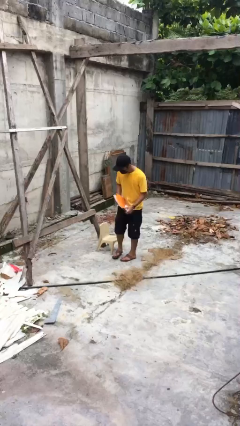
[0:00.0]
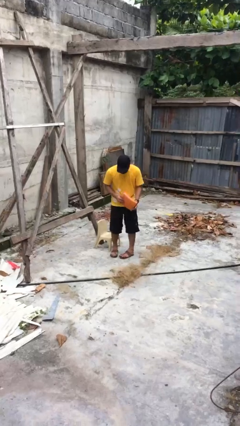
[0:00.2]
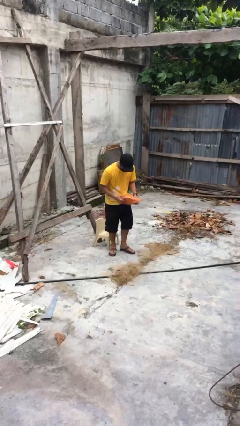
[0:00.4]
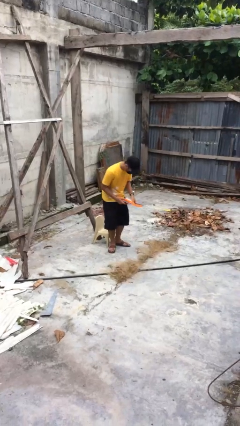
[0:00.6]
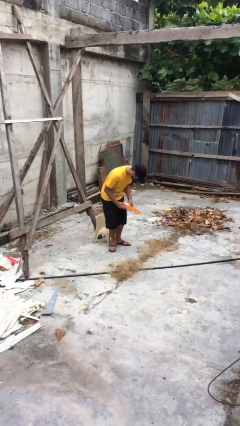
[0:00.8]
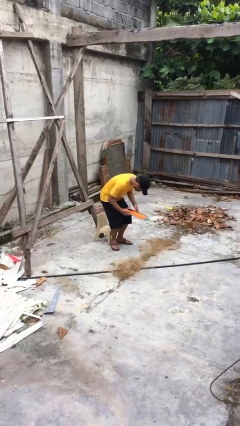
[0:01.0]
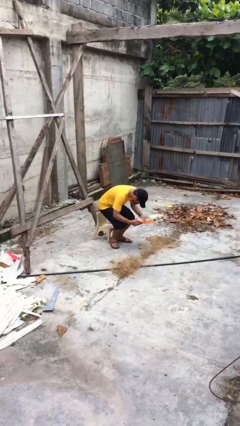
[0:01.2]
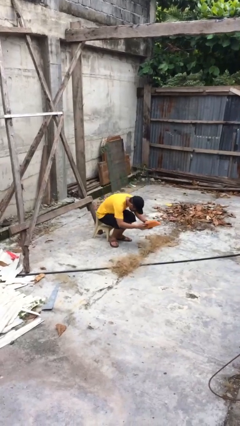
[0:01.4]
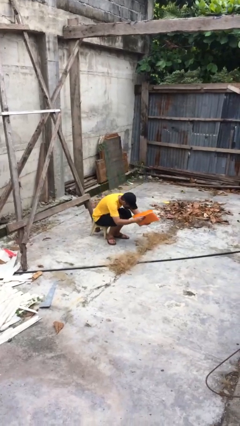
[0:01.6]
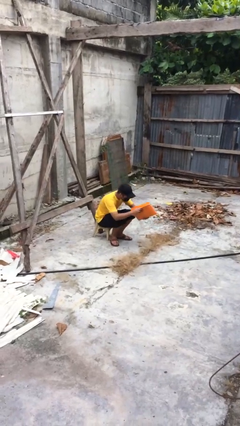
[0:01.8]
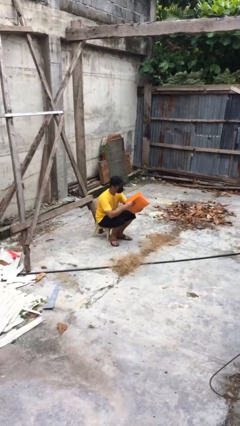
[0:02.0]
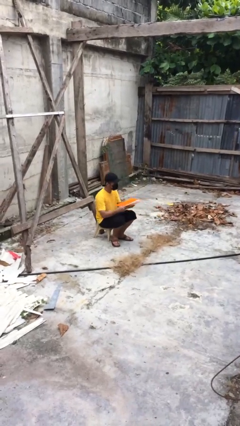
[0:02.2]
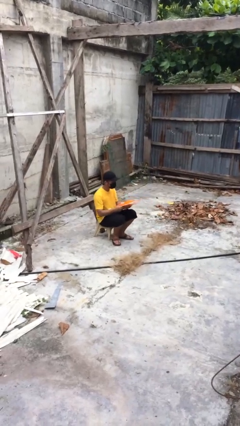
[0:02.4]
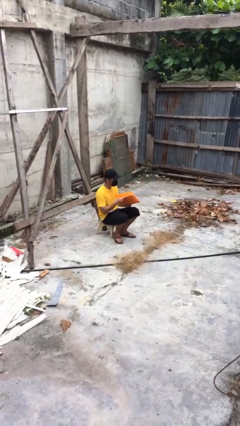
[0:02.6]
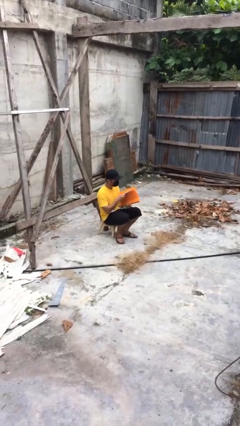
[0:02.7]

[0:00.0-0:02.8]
person sits down

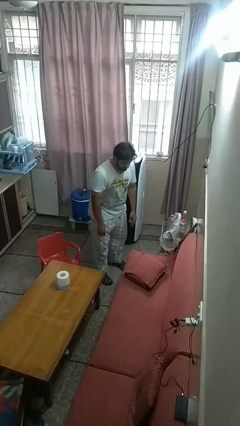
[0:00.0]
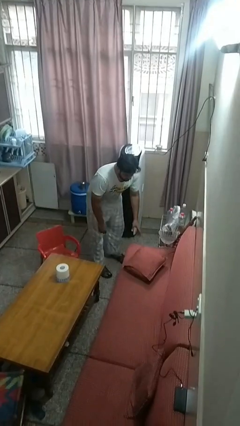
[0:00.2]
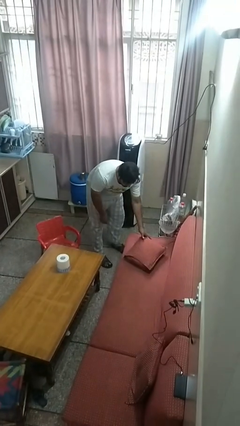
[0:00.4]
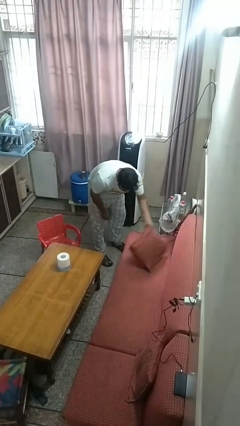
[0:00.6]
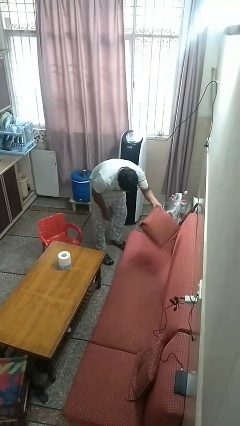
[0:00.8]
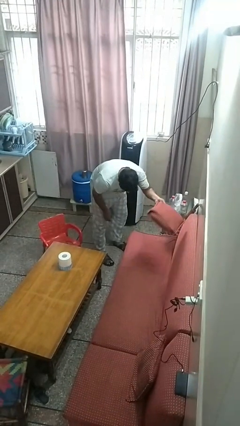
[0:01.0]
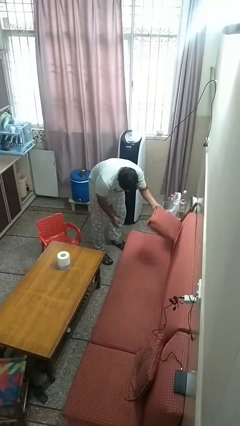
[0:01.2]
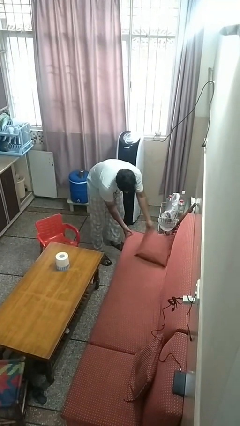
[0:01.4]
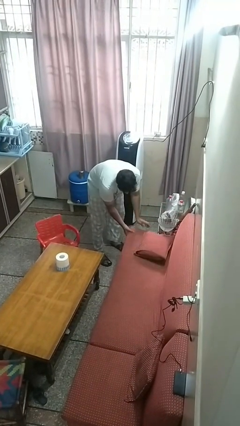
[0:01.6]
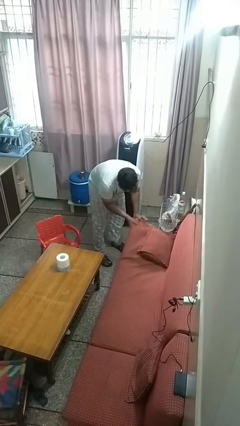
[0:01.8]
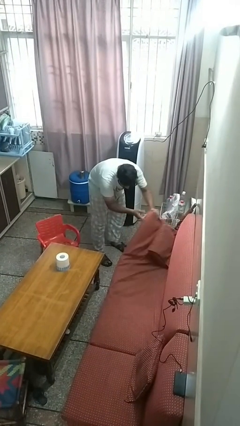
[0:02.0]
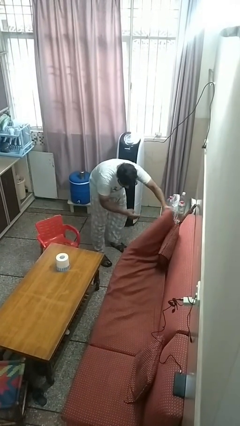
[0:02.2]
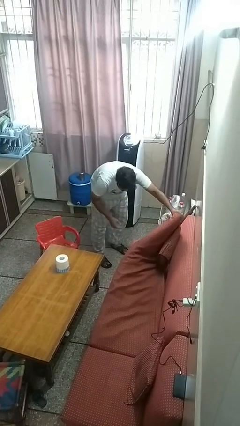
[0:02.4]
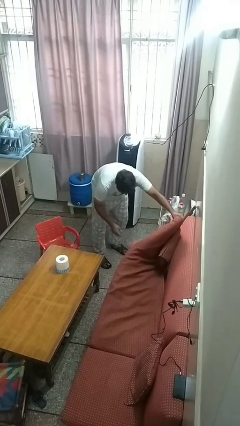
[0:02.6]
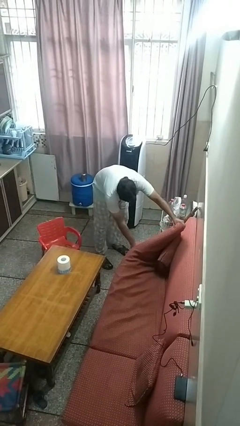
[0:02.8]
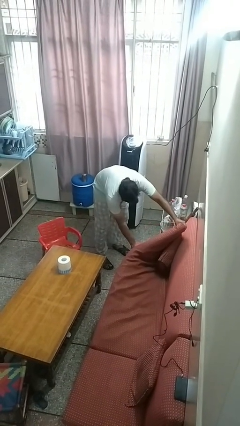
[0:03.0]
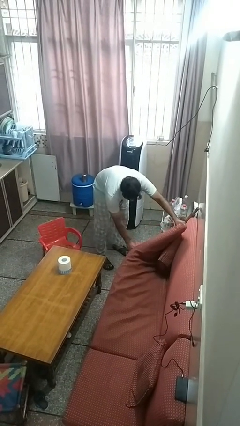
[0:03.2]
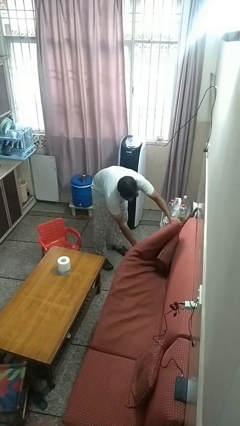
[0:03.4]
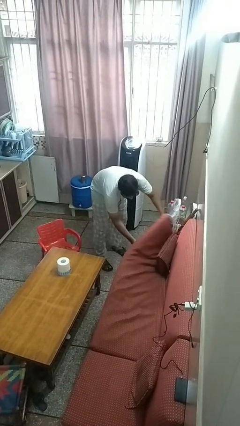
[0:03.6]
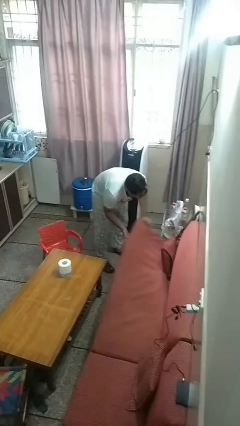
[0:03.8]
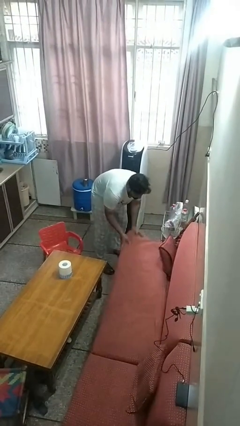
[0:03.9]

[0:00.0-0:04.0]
person searches under couch

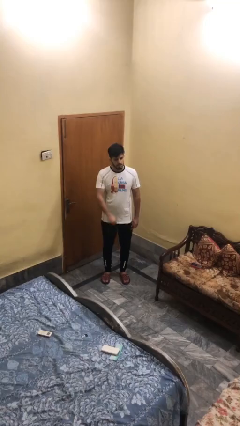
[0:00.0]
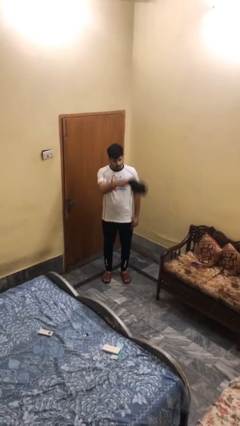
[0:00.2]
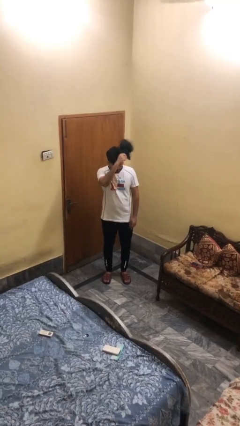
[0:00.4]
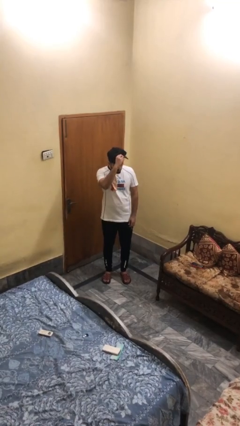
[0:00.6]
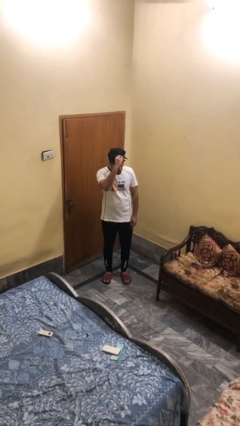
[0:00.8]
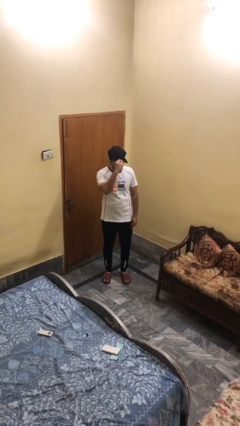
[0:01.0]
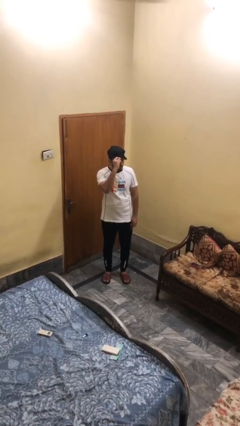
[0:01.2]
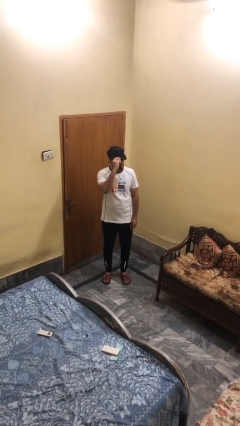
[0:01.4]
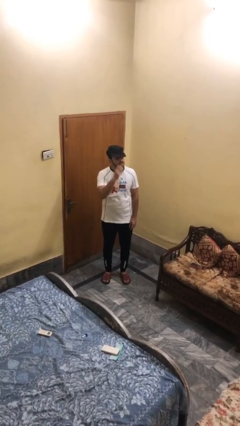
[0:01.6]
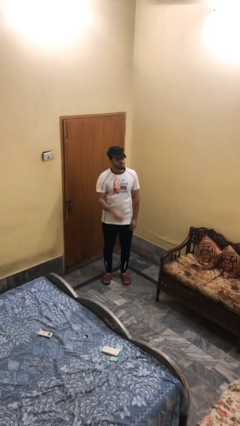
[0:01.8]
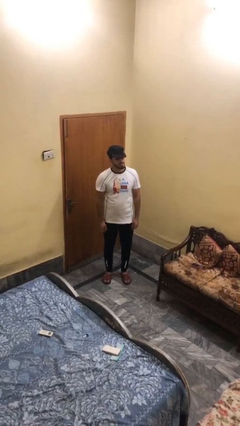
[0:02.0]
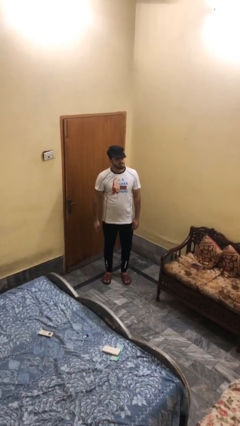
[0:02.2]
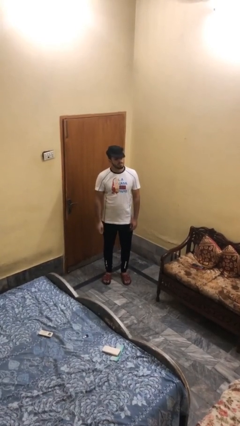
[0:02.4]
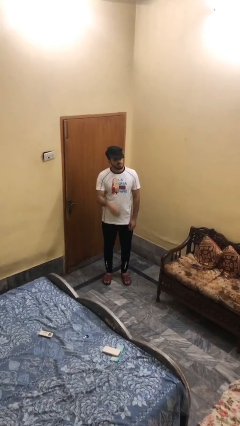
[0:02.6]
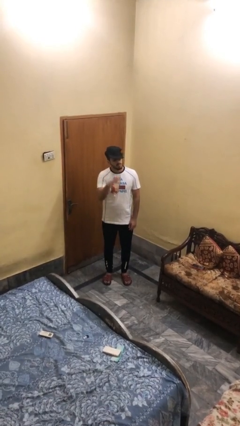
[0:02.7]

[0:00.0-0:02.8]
person puts on hat

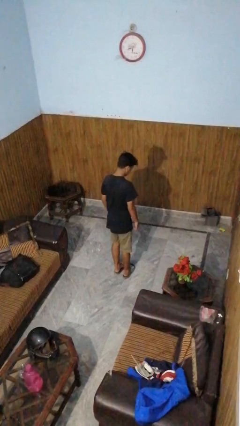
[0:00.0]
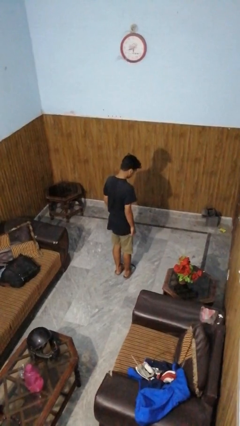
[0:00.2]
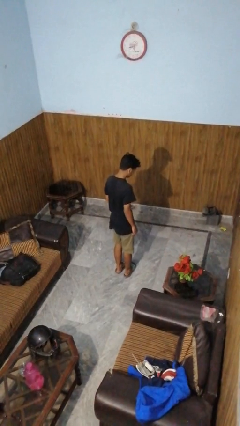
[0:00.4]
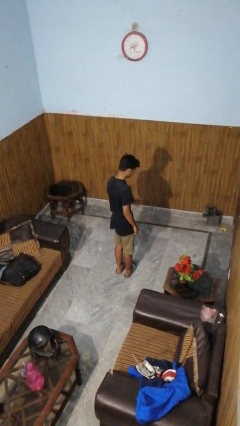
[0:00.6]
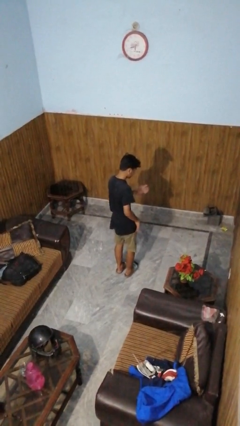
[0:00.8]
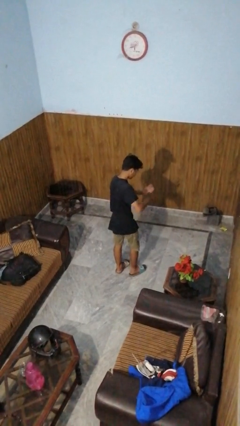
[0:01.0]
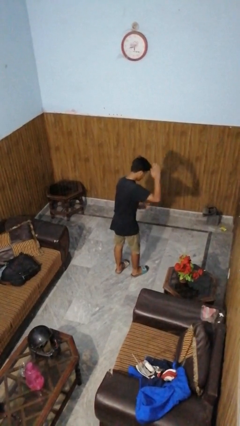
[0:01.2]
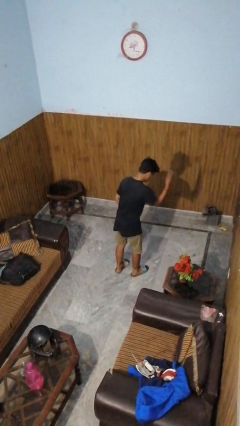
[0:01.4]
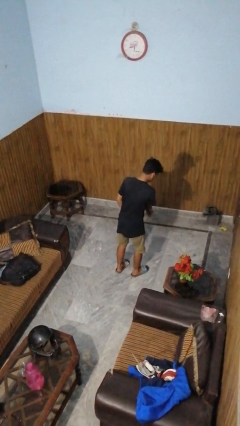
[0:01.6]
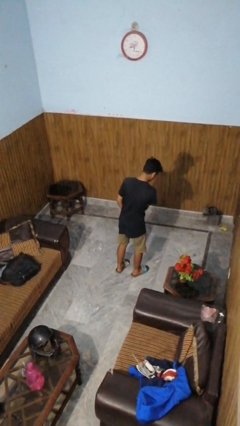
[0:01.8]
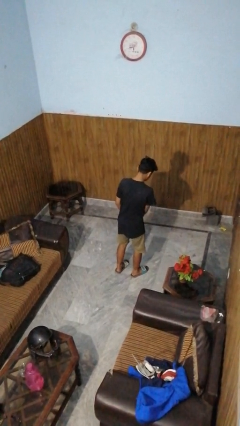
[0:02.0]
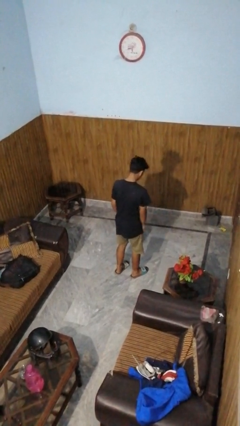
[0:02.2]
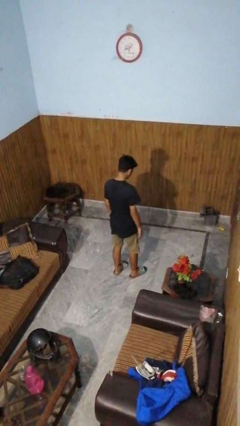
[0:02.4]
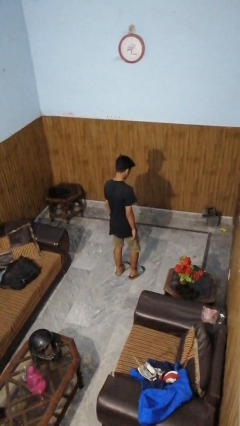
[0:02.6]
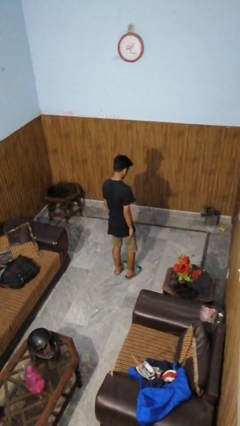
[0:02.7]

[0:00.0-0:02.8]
person karate chop

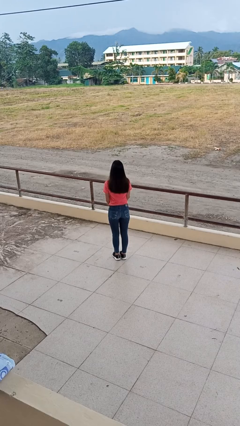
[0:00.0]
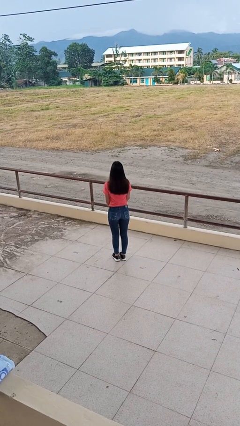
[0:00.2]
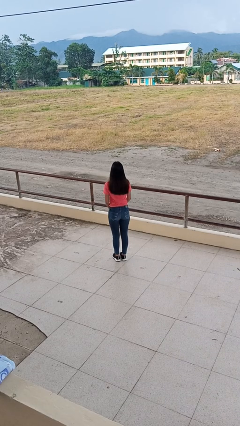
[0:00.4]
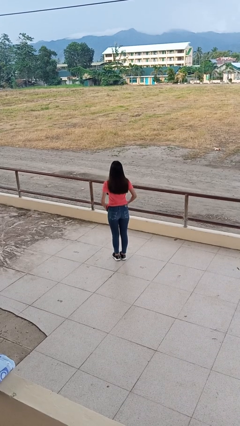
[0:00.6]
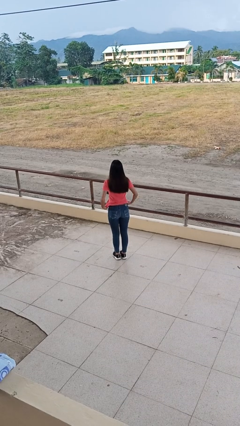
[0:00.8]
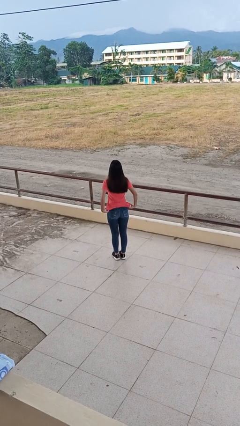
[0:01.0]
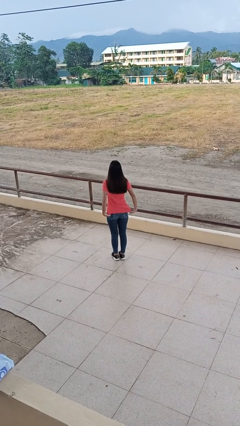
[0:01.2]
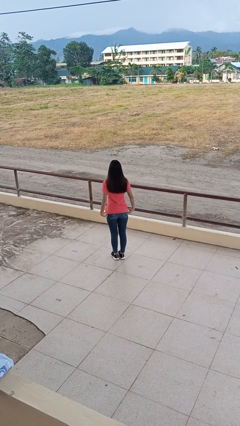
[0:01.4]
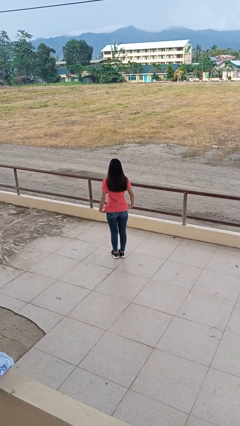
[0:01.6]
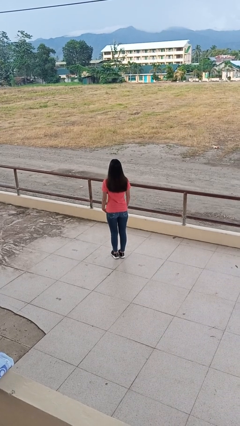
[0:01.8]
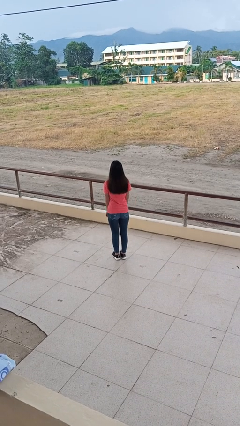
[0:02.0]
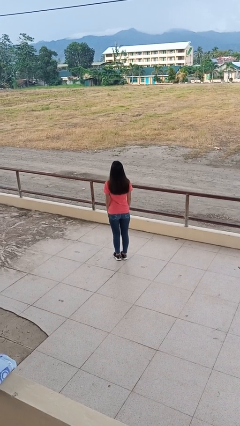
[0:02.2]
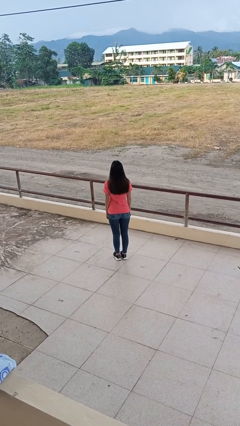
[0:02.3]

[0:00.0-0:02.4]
person untucks shirt

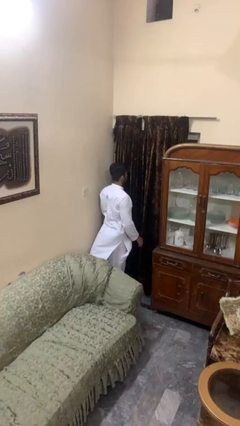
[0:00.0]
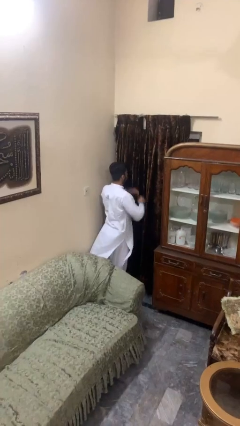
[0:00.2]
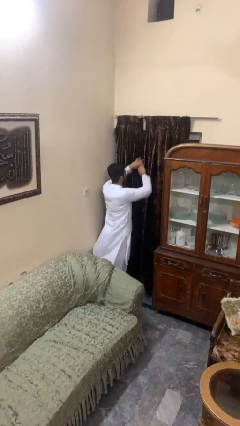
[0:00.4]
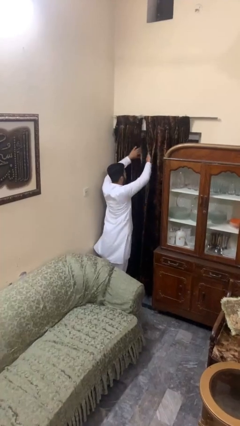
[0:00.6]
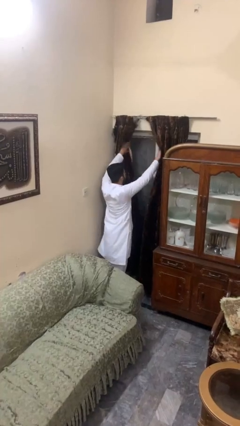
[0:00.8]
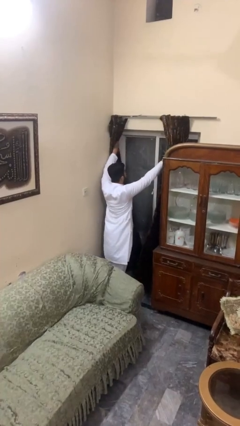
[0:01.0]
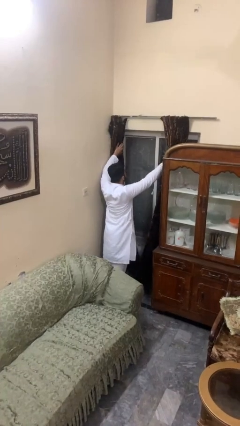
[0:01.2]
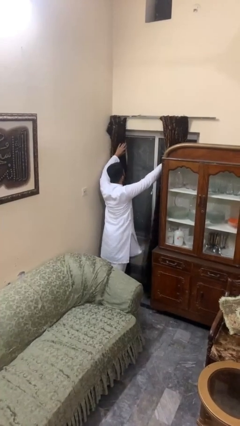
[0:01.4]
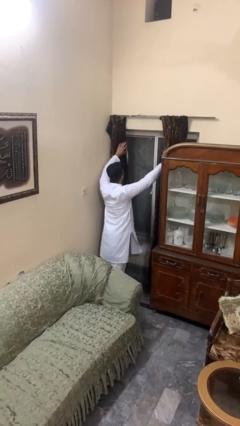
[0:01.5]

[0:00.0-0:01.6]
person opens curtains

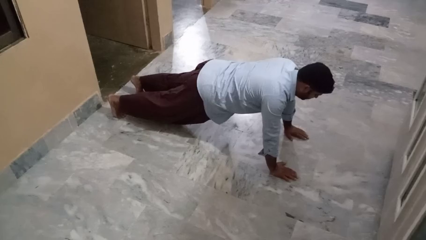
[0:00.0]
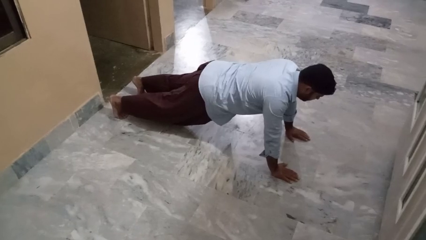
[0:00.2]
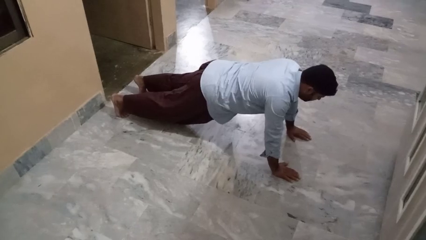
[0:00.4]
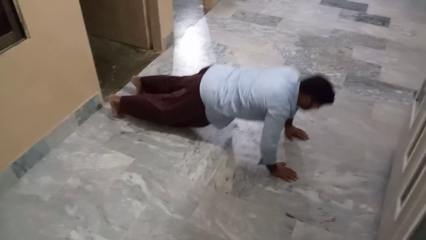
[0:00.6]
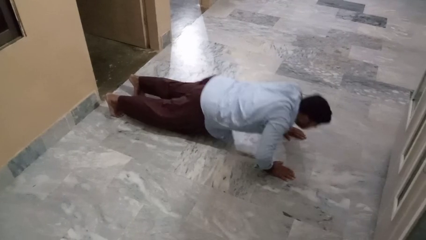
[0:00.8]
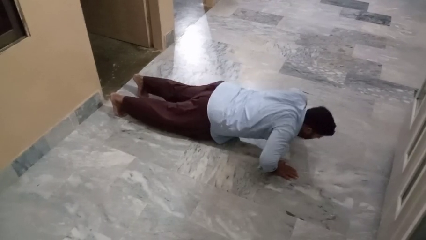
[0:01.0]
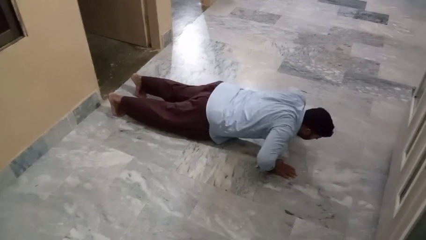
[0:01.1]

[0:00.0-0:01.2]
person exercises with pushup
